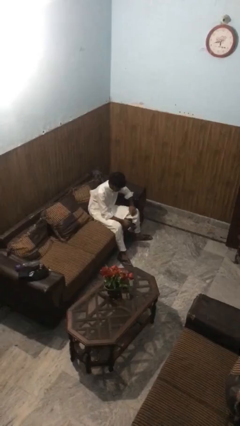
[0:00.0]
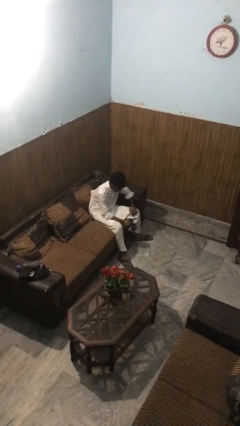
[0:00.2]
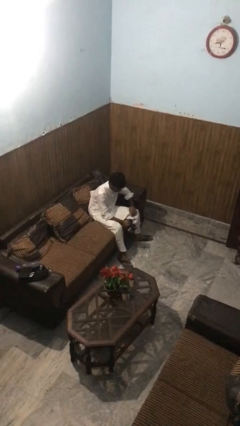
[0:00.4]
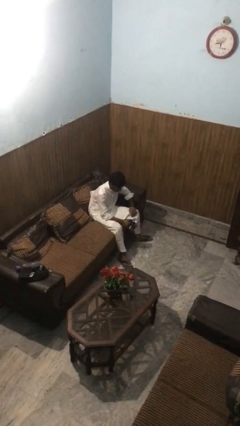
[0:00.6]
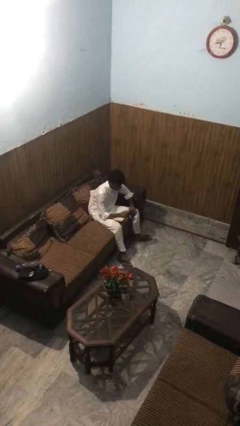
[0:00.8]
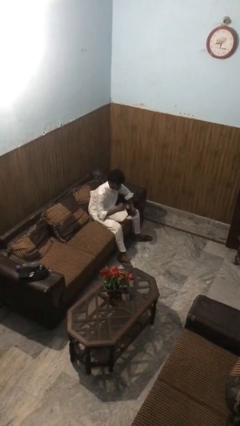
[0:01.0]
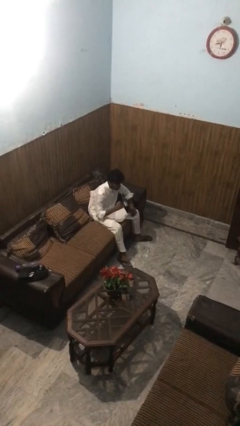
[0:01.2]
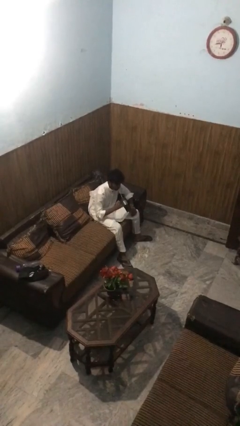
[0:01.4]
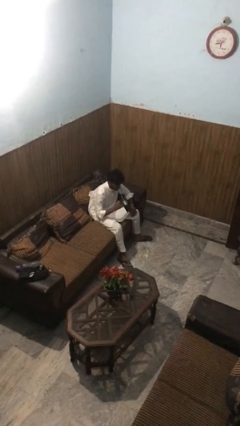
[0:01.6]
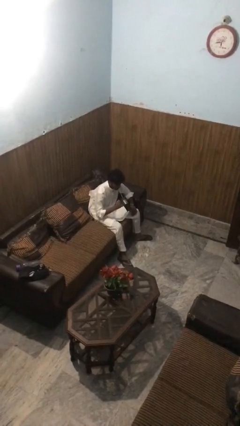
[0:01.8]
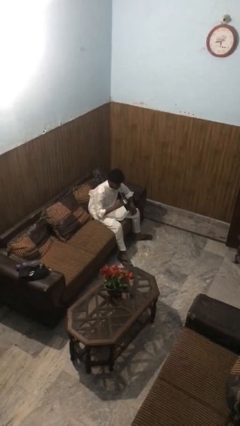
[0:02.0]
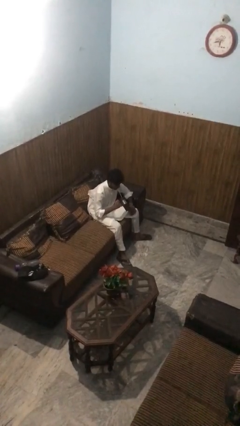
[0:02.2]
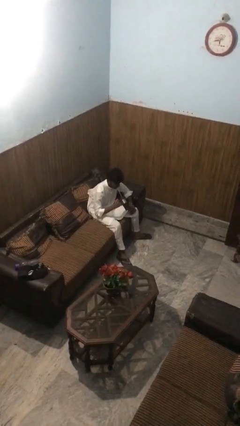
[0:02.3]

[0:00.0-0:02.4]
person drinks from straw

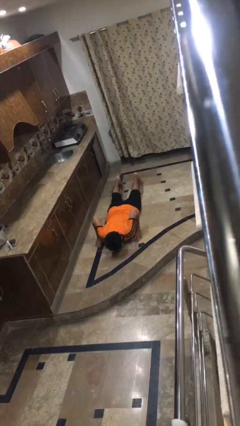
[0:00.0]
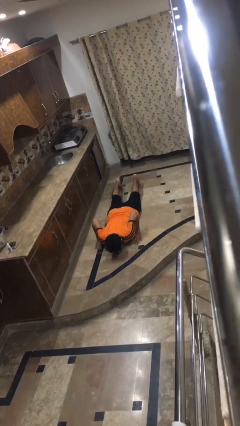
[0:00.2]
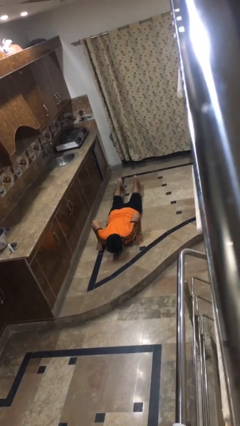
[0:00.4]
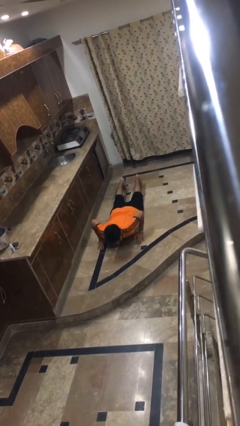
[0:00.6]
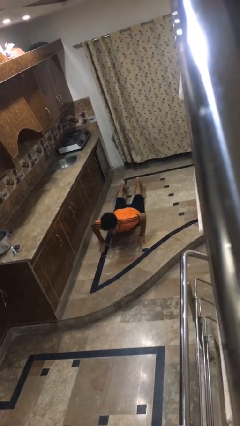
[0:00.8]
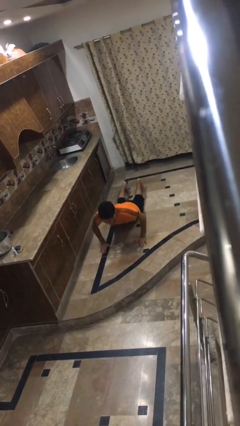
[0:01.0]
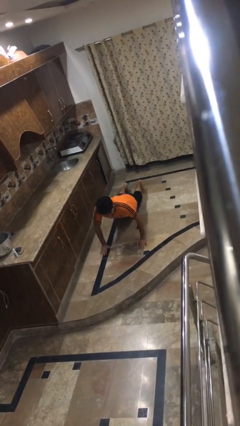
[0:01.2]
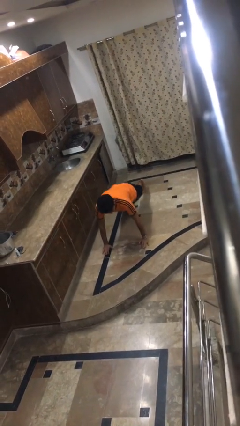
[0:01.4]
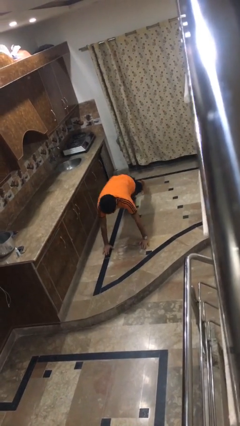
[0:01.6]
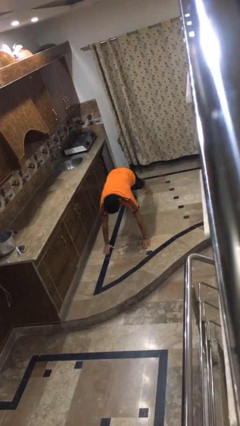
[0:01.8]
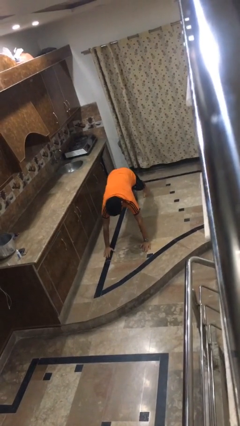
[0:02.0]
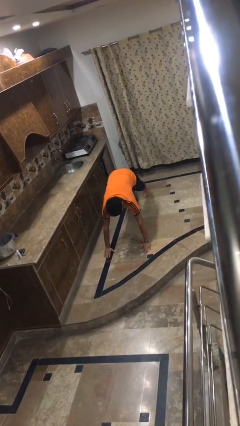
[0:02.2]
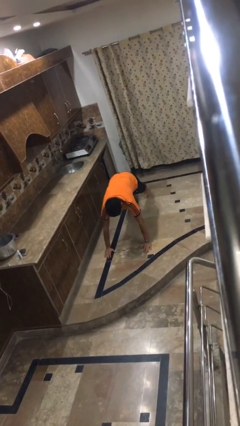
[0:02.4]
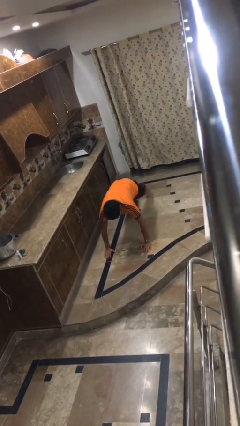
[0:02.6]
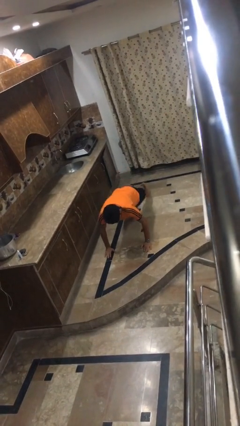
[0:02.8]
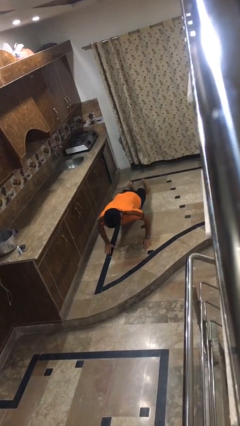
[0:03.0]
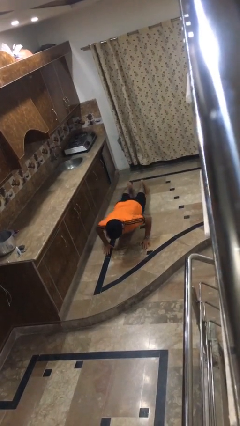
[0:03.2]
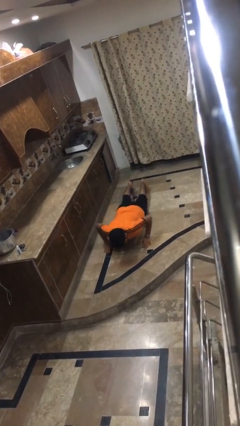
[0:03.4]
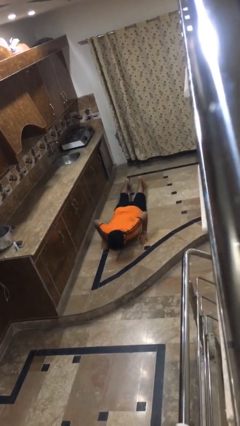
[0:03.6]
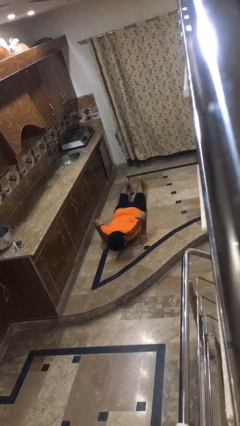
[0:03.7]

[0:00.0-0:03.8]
person exercises with pushup

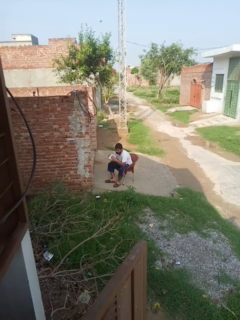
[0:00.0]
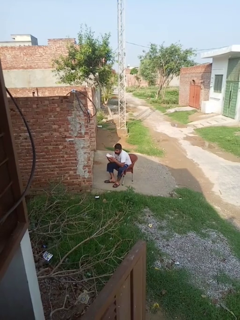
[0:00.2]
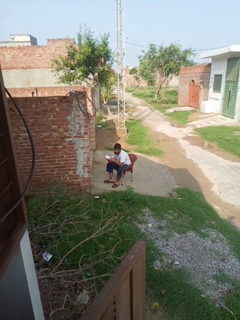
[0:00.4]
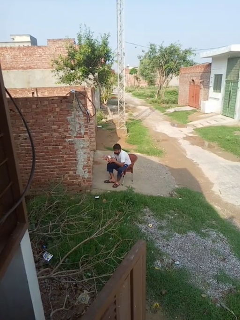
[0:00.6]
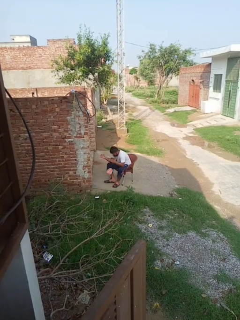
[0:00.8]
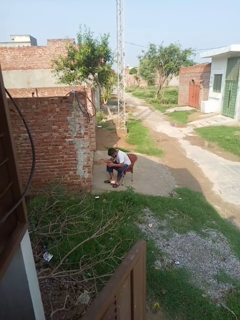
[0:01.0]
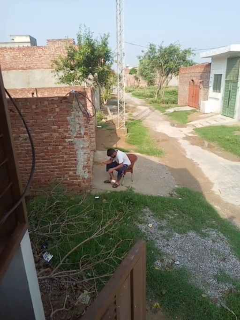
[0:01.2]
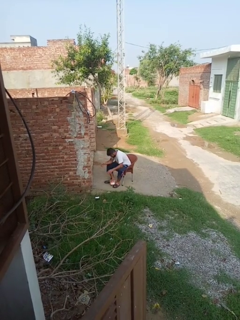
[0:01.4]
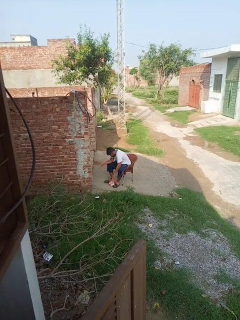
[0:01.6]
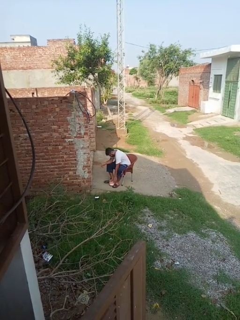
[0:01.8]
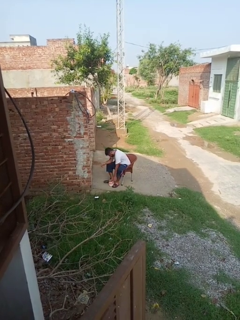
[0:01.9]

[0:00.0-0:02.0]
person drops object

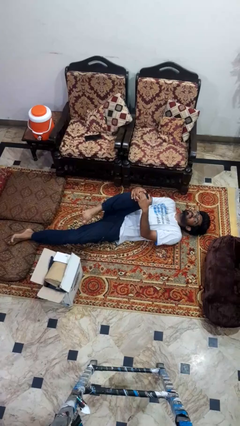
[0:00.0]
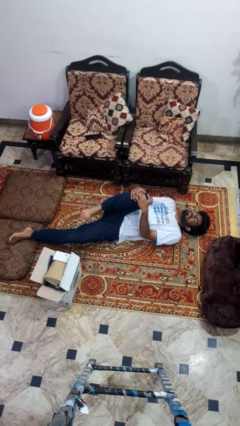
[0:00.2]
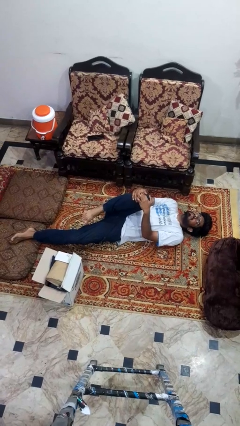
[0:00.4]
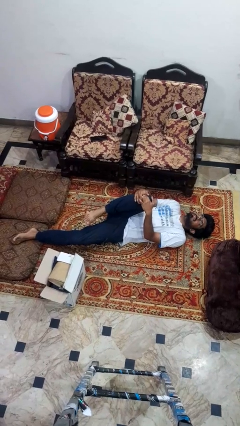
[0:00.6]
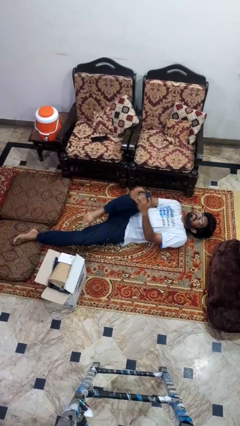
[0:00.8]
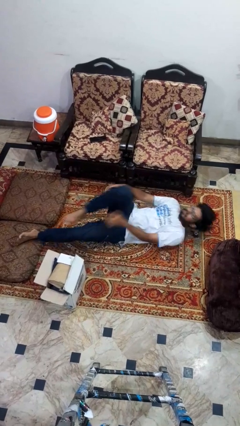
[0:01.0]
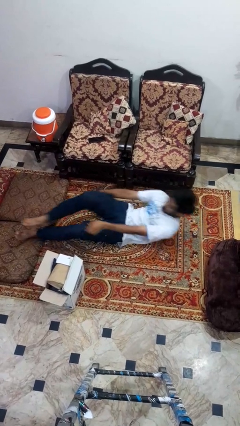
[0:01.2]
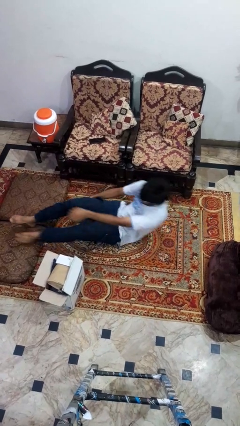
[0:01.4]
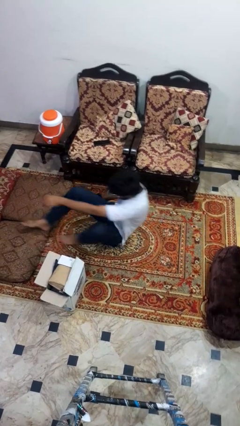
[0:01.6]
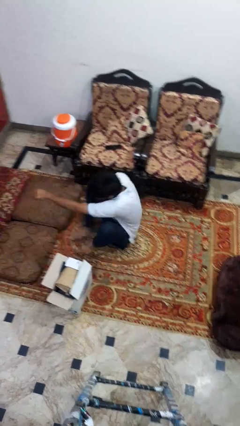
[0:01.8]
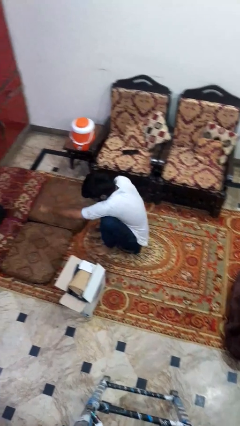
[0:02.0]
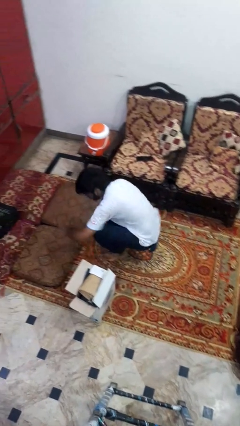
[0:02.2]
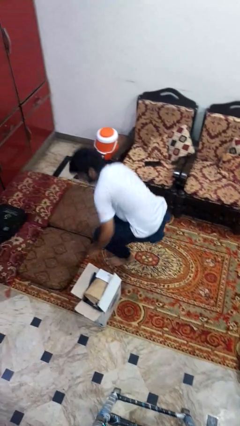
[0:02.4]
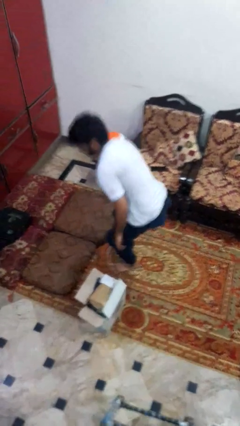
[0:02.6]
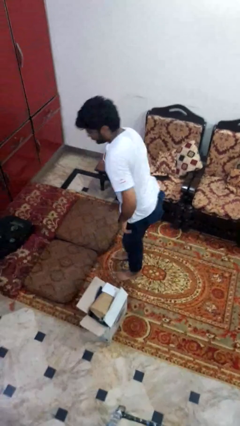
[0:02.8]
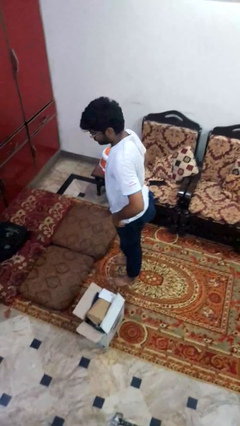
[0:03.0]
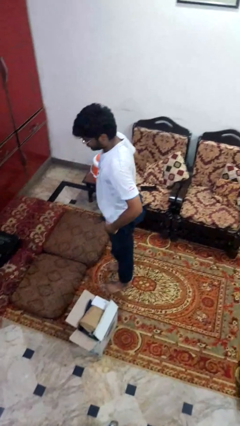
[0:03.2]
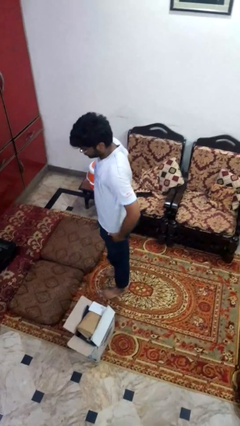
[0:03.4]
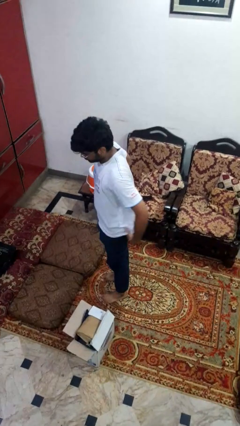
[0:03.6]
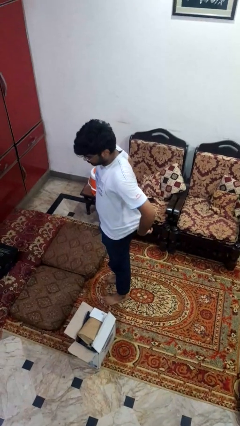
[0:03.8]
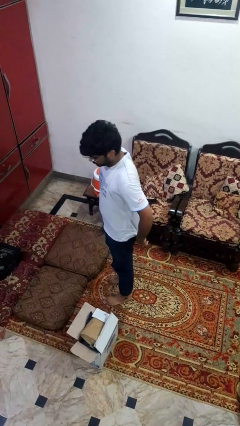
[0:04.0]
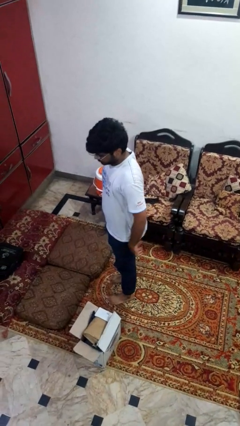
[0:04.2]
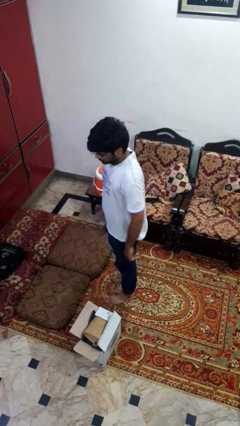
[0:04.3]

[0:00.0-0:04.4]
person stands up from floor

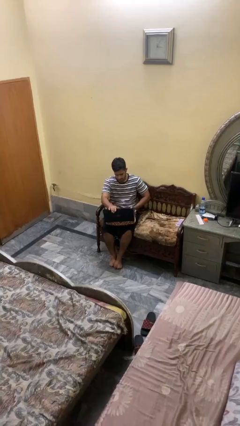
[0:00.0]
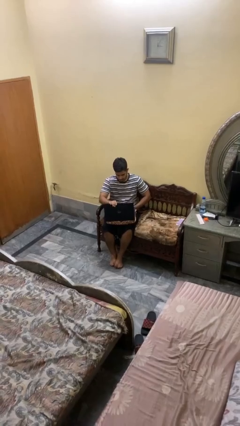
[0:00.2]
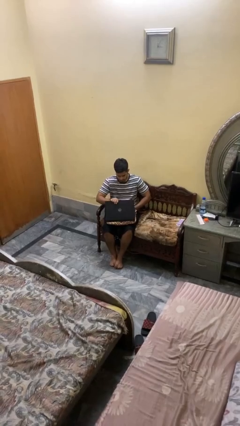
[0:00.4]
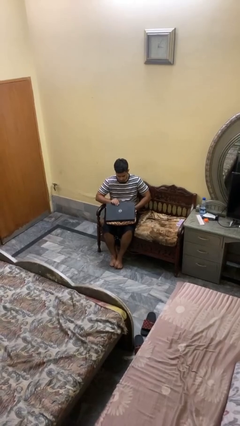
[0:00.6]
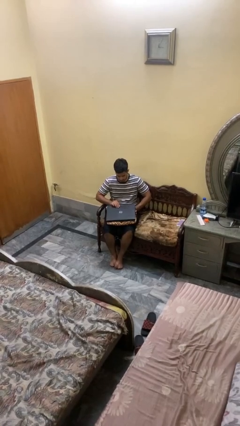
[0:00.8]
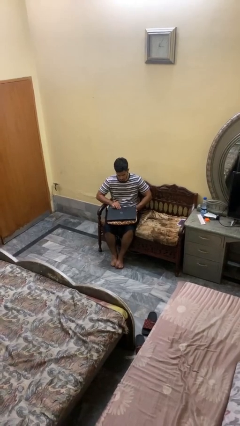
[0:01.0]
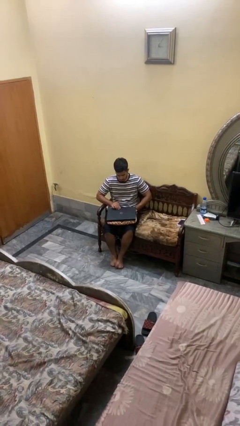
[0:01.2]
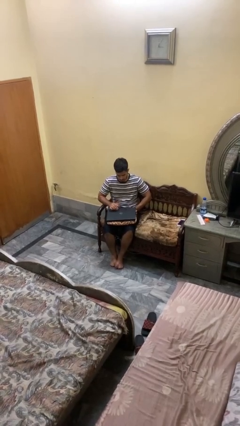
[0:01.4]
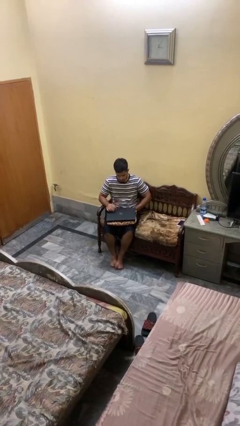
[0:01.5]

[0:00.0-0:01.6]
person closes laptop

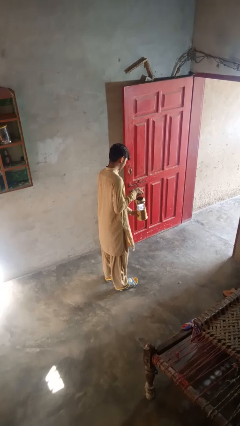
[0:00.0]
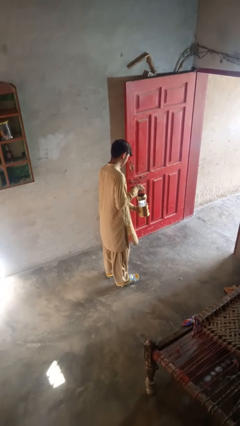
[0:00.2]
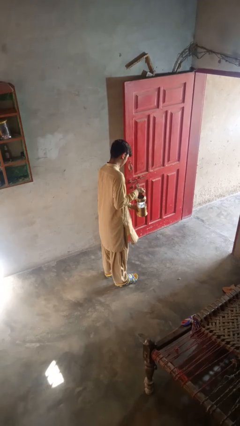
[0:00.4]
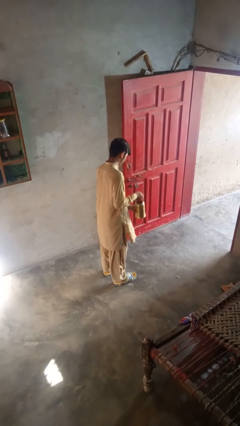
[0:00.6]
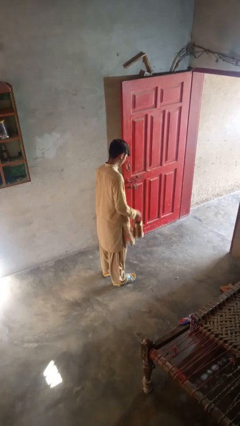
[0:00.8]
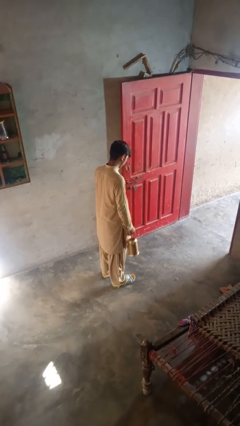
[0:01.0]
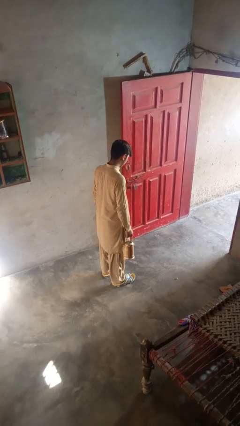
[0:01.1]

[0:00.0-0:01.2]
person turns off lamp

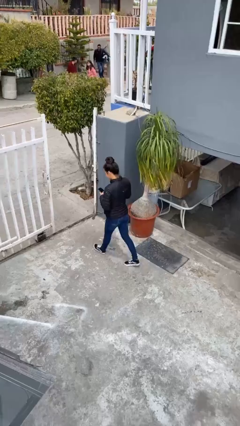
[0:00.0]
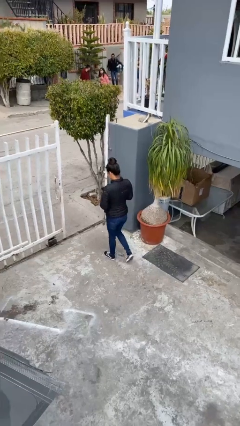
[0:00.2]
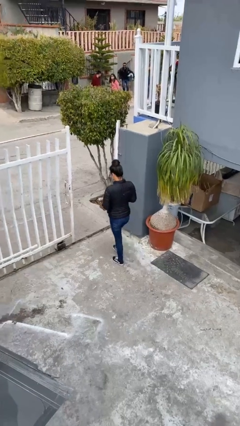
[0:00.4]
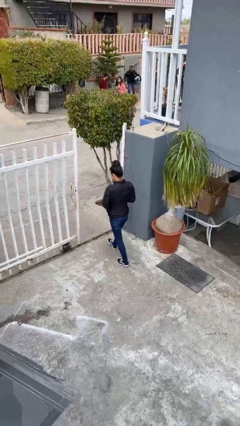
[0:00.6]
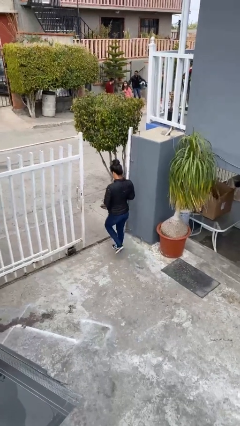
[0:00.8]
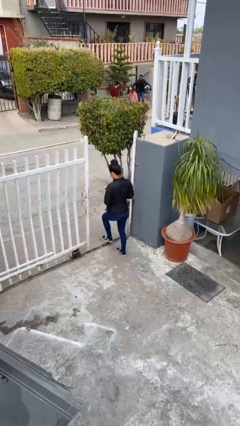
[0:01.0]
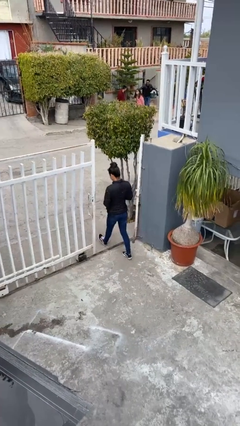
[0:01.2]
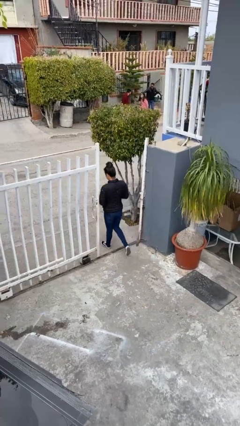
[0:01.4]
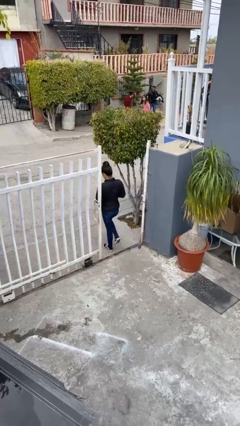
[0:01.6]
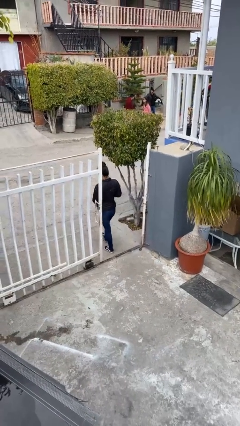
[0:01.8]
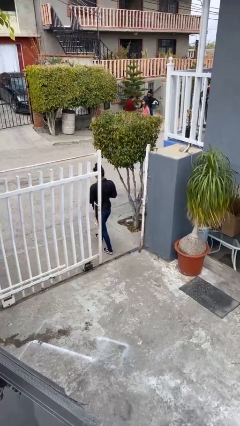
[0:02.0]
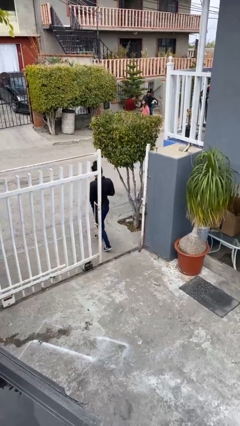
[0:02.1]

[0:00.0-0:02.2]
person exits scene through structure
